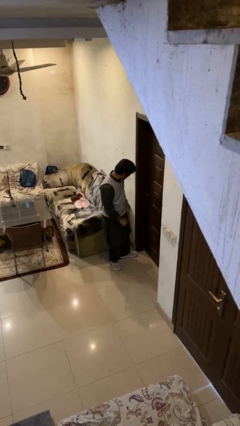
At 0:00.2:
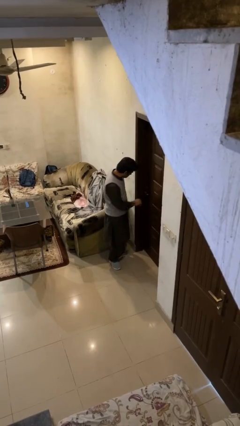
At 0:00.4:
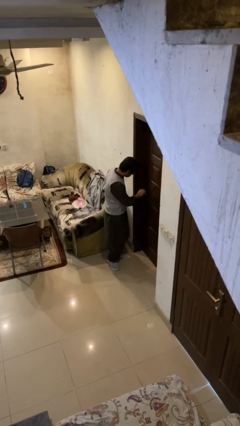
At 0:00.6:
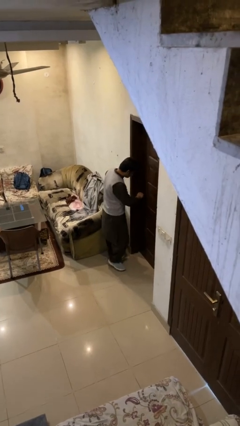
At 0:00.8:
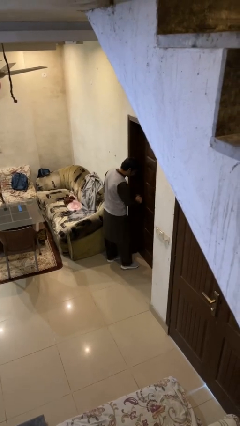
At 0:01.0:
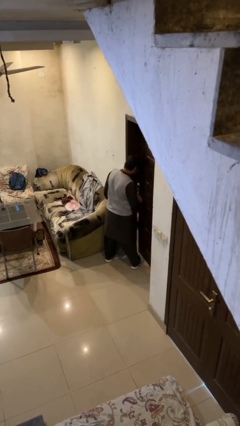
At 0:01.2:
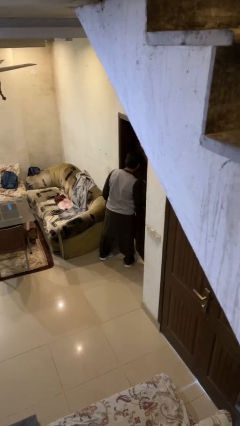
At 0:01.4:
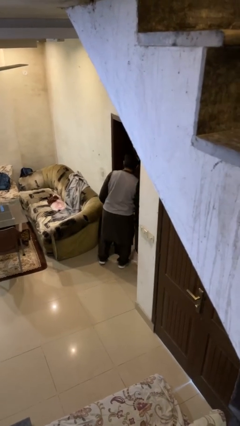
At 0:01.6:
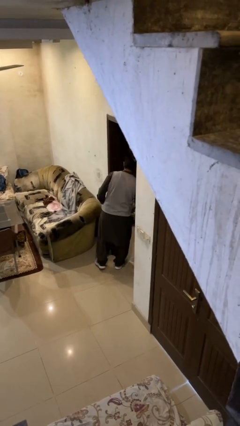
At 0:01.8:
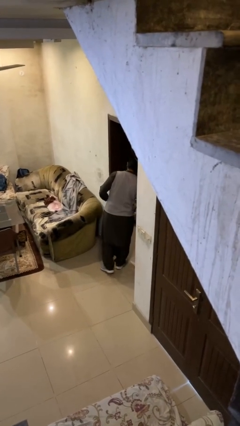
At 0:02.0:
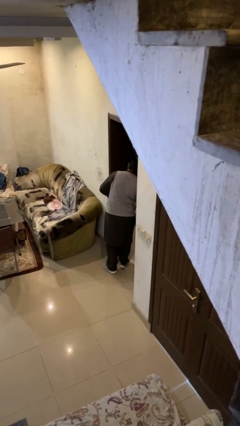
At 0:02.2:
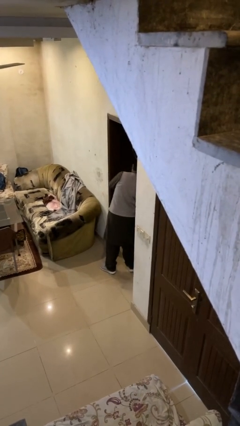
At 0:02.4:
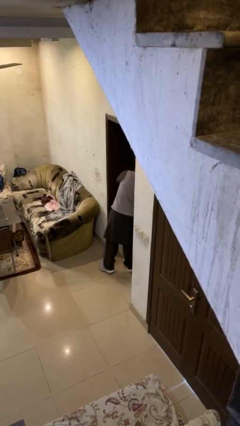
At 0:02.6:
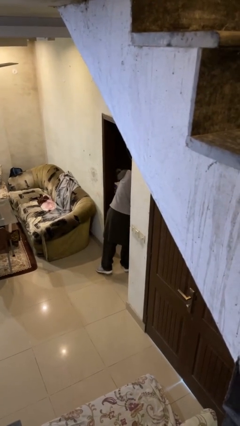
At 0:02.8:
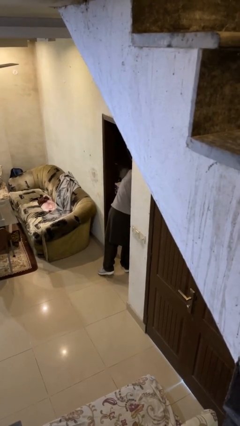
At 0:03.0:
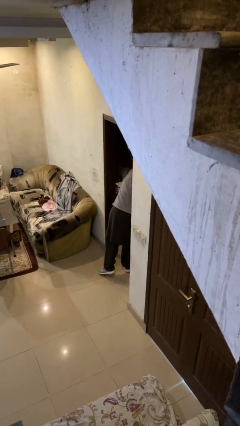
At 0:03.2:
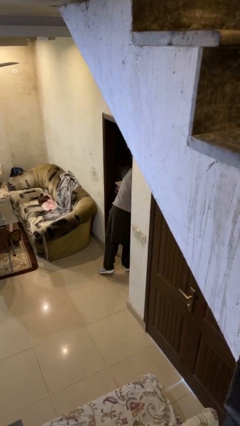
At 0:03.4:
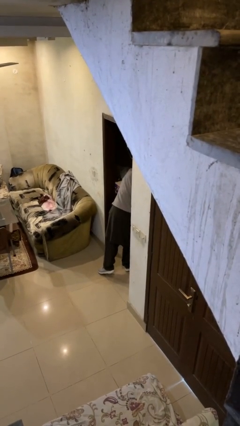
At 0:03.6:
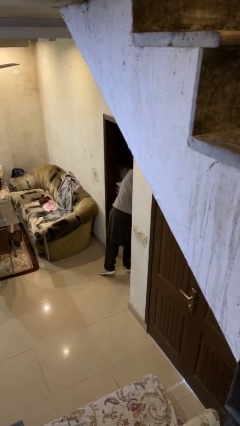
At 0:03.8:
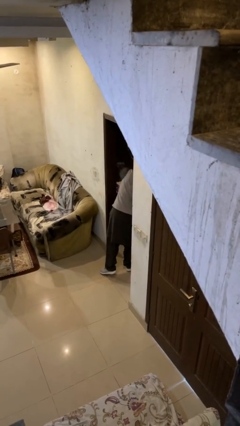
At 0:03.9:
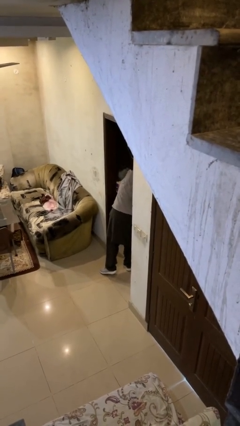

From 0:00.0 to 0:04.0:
person opens facility door

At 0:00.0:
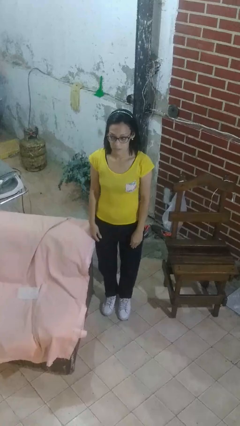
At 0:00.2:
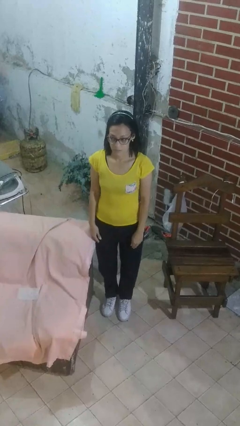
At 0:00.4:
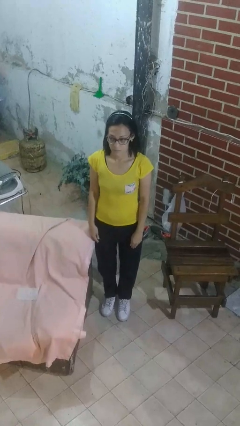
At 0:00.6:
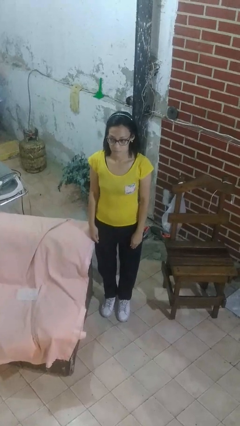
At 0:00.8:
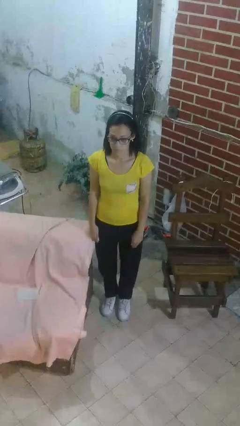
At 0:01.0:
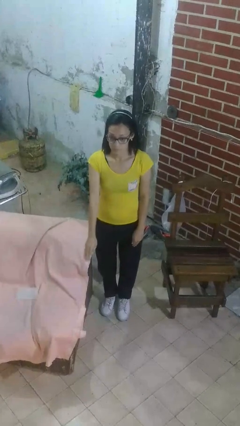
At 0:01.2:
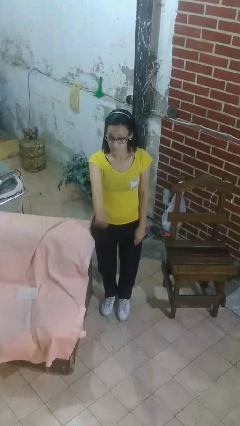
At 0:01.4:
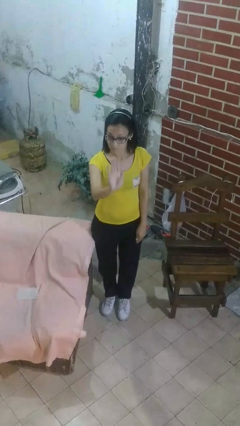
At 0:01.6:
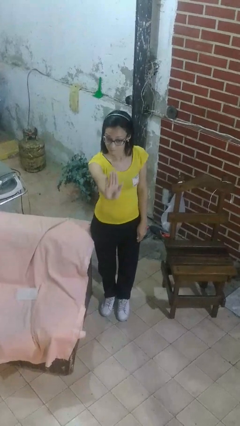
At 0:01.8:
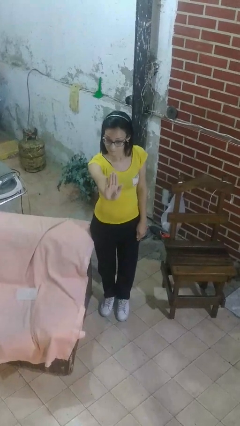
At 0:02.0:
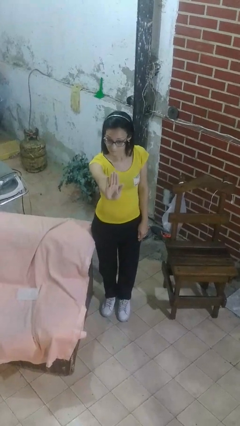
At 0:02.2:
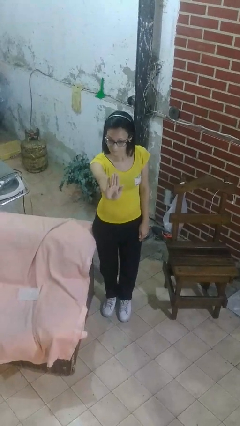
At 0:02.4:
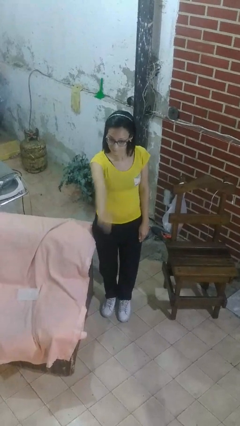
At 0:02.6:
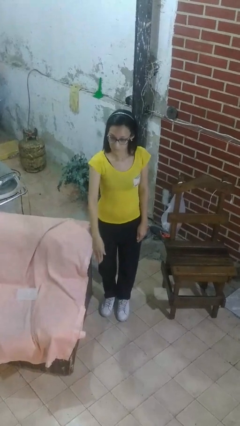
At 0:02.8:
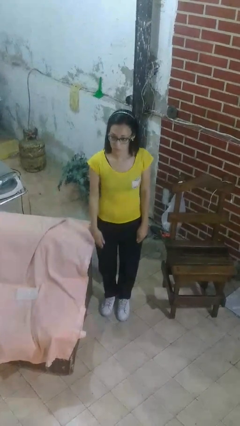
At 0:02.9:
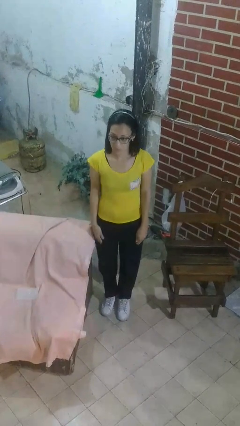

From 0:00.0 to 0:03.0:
person gestures stop

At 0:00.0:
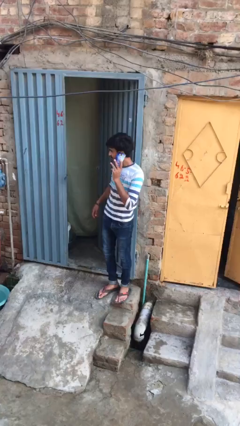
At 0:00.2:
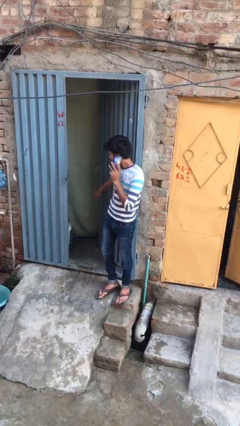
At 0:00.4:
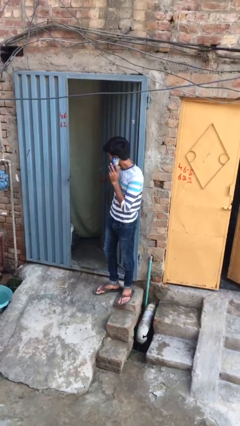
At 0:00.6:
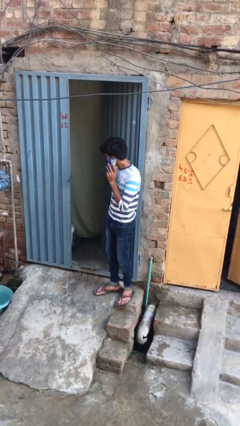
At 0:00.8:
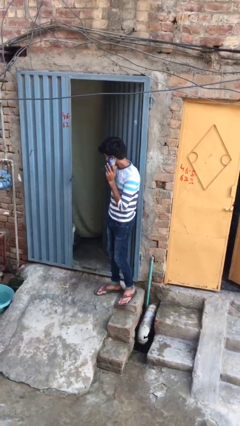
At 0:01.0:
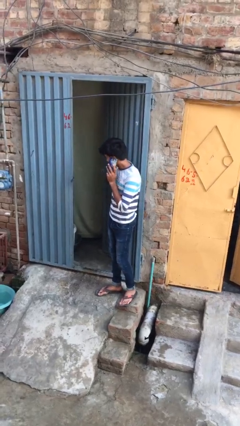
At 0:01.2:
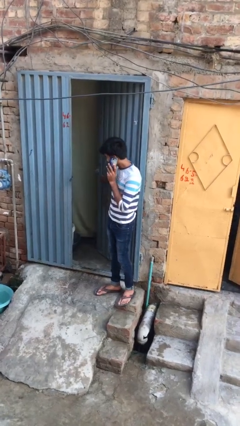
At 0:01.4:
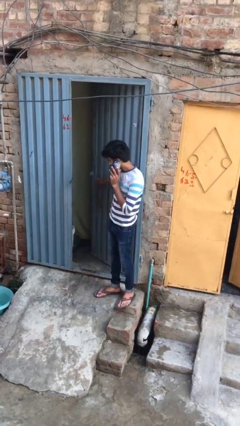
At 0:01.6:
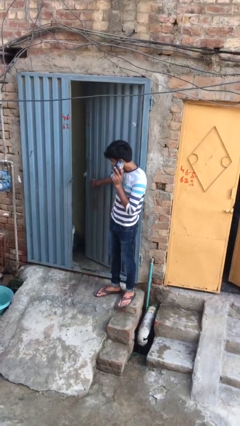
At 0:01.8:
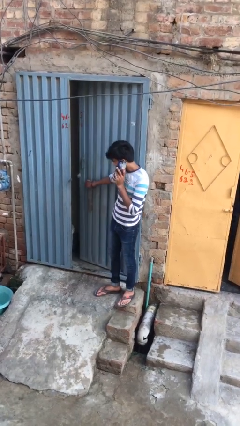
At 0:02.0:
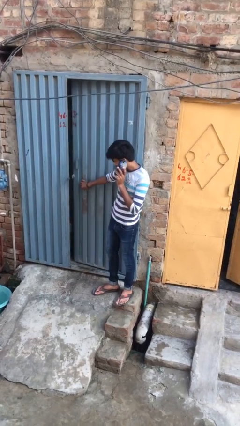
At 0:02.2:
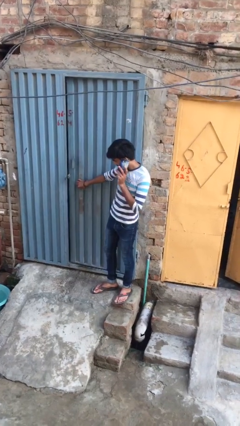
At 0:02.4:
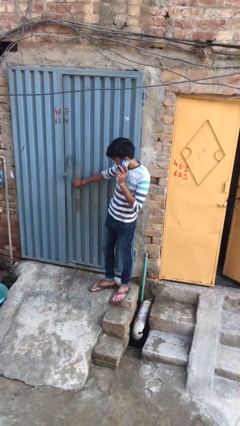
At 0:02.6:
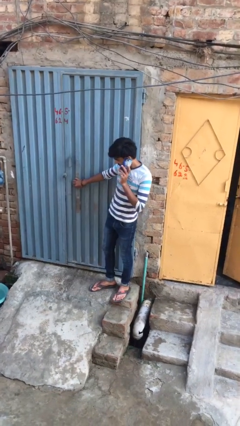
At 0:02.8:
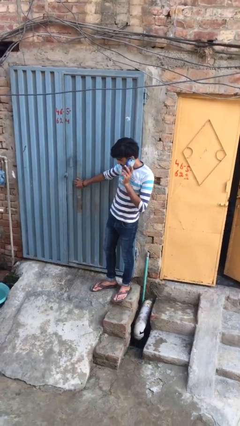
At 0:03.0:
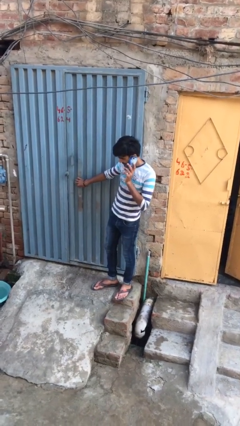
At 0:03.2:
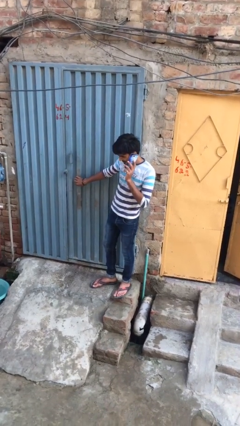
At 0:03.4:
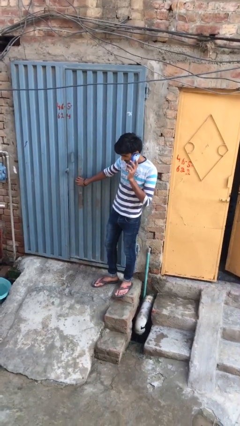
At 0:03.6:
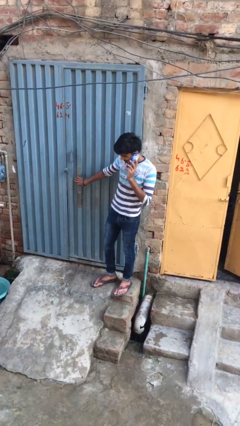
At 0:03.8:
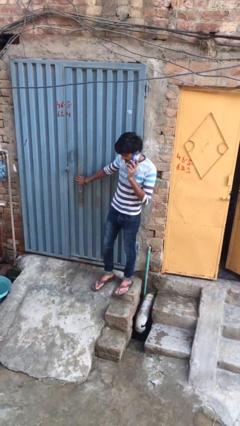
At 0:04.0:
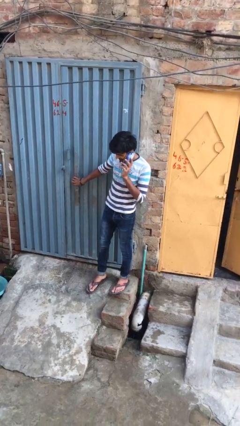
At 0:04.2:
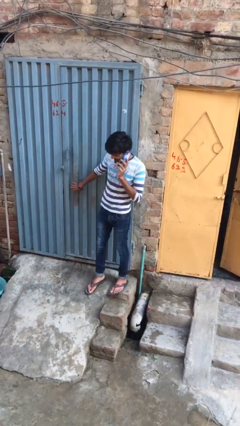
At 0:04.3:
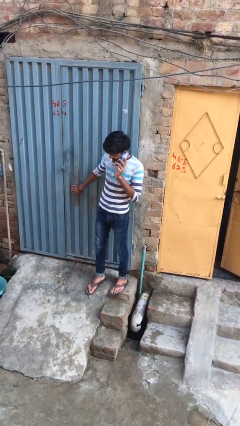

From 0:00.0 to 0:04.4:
person closes facility door

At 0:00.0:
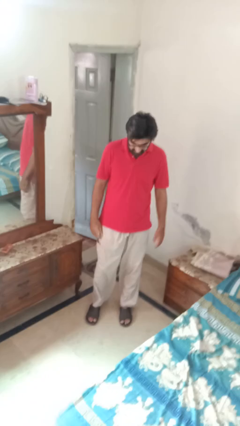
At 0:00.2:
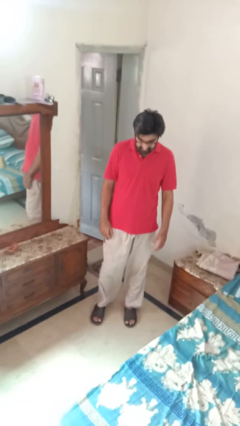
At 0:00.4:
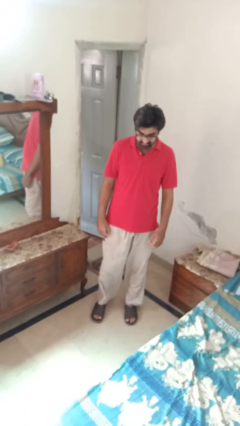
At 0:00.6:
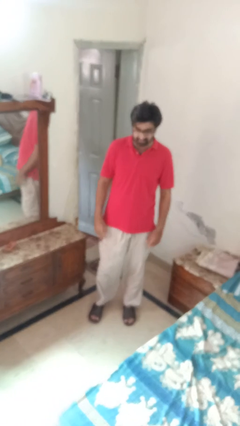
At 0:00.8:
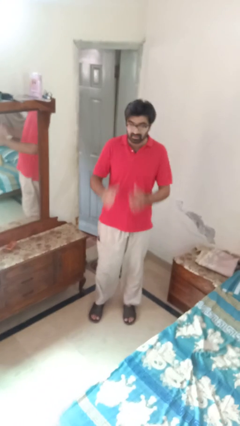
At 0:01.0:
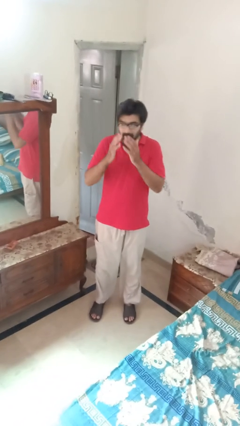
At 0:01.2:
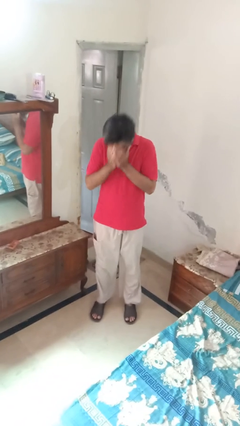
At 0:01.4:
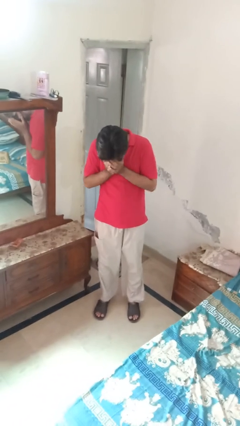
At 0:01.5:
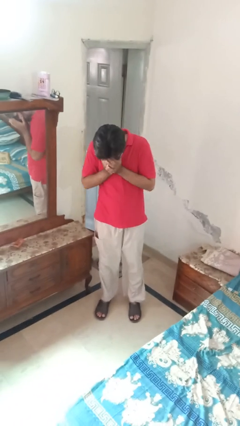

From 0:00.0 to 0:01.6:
person sneezes into hand

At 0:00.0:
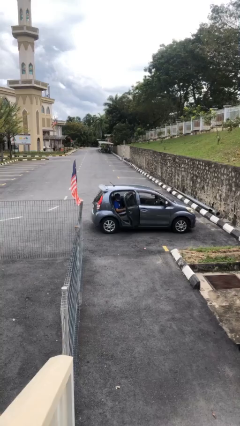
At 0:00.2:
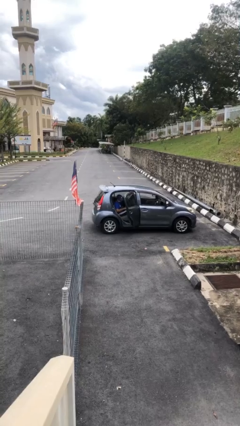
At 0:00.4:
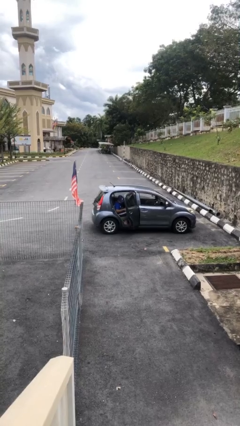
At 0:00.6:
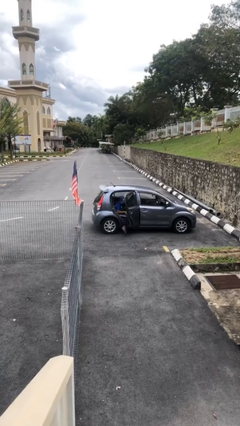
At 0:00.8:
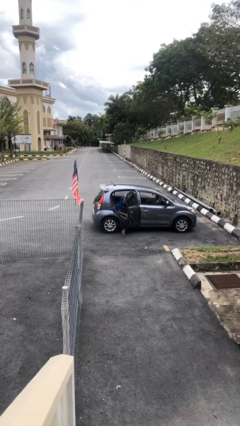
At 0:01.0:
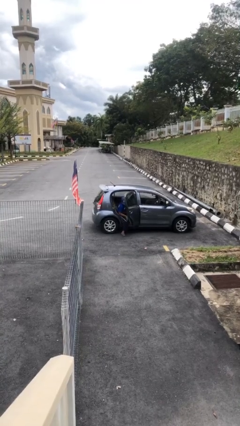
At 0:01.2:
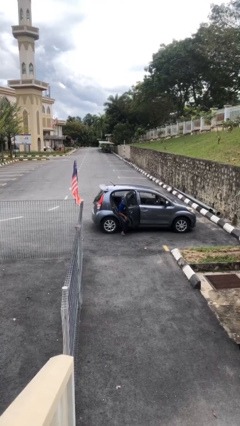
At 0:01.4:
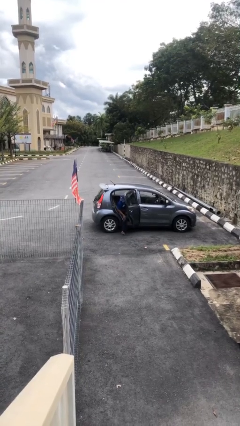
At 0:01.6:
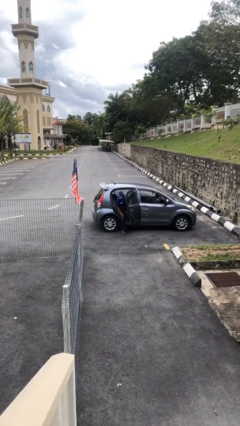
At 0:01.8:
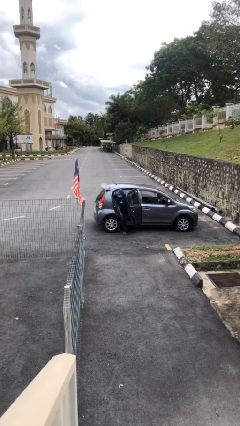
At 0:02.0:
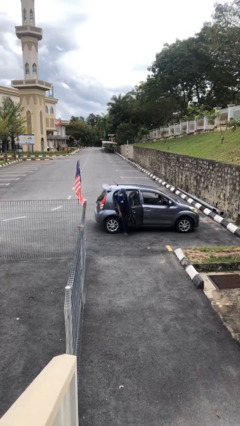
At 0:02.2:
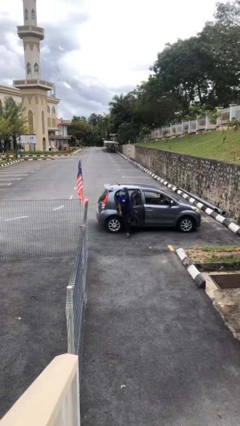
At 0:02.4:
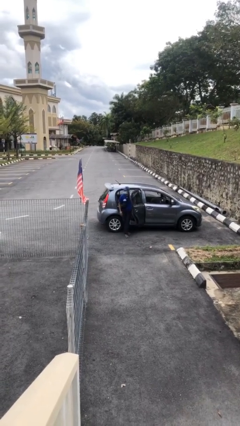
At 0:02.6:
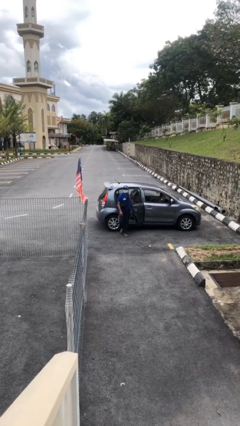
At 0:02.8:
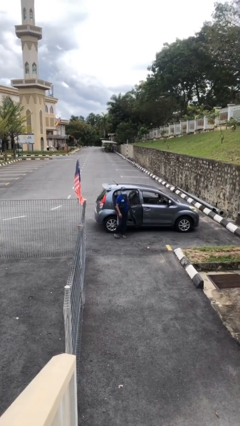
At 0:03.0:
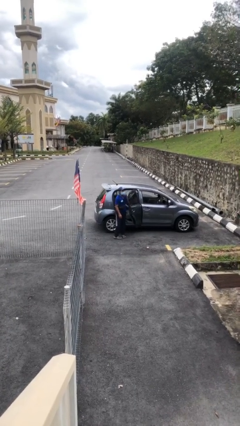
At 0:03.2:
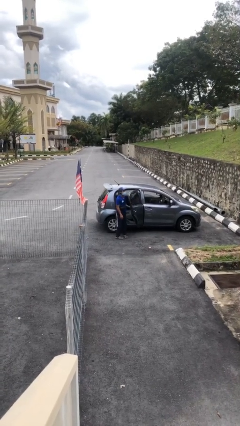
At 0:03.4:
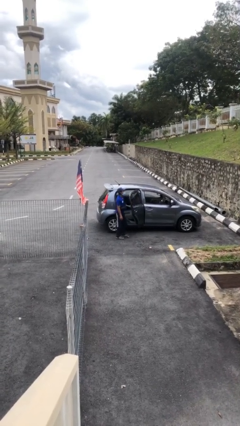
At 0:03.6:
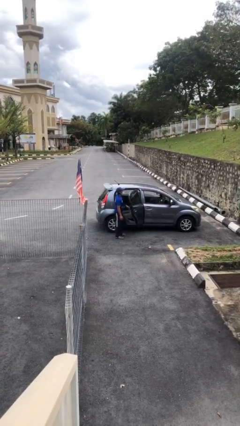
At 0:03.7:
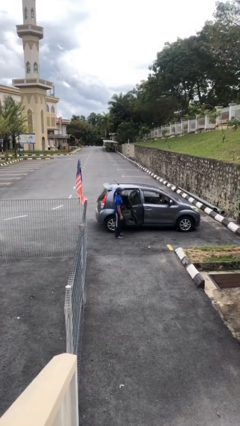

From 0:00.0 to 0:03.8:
person exits car

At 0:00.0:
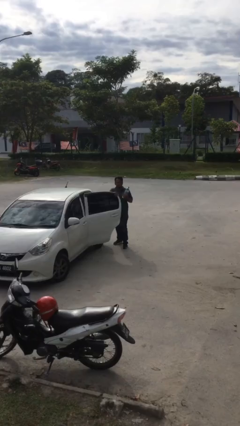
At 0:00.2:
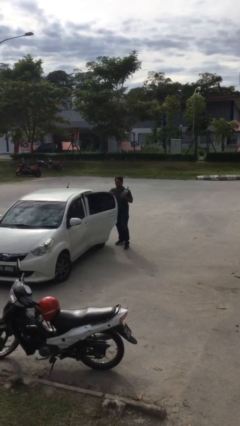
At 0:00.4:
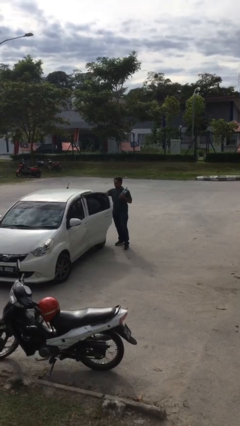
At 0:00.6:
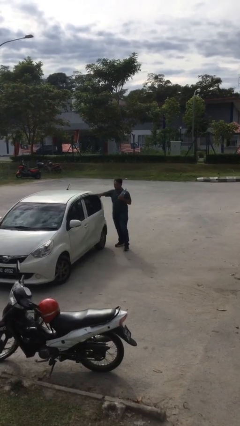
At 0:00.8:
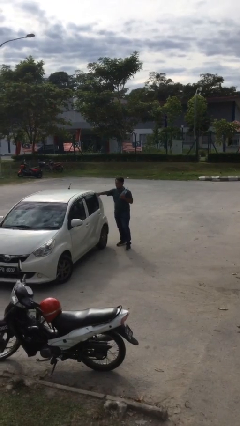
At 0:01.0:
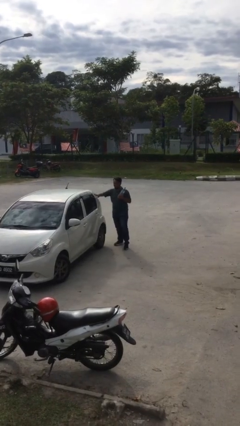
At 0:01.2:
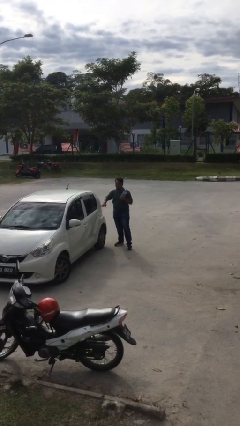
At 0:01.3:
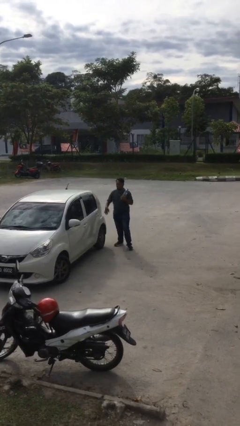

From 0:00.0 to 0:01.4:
person closes car door
